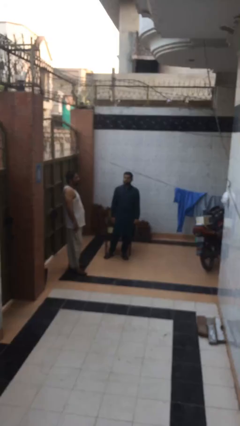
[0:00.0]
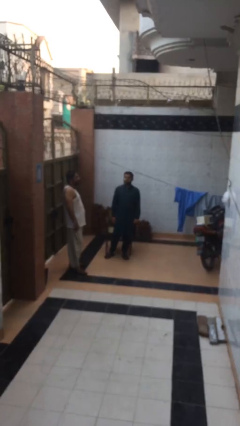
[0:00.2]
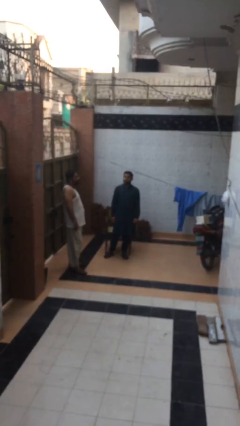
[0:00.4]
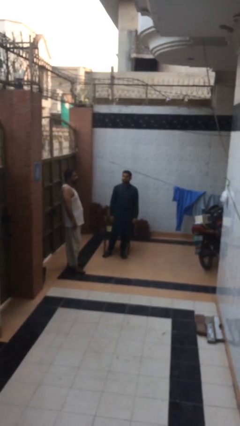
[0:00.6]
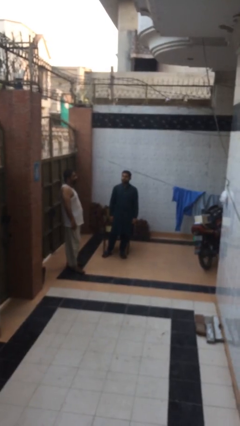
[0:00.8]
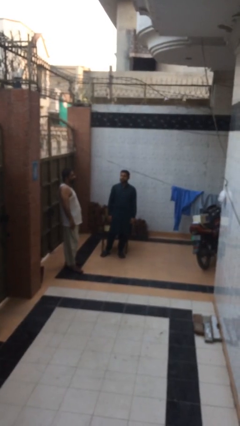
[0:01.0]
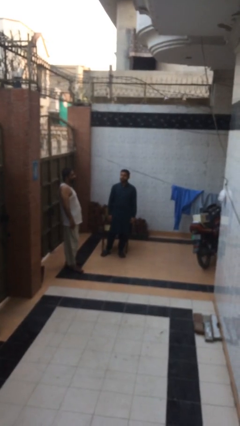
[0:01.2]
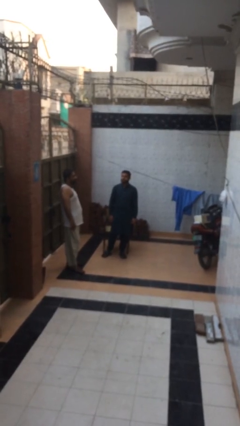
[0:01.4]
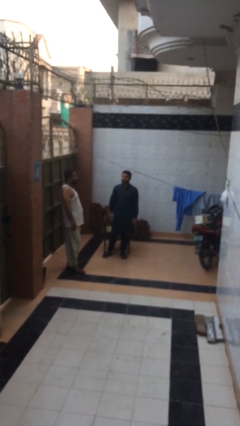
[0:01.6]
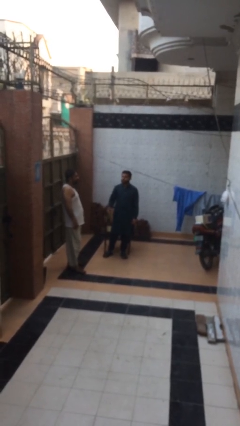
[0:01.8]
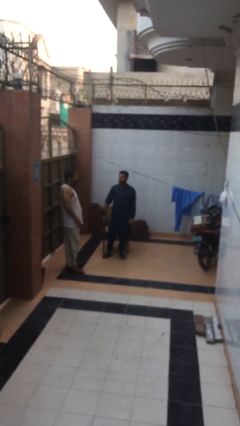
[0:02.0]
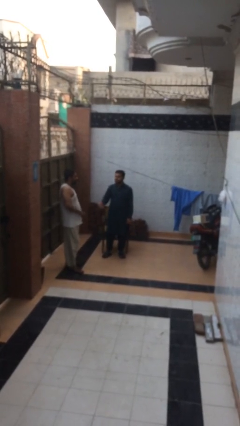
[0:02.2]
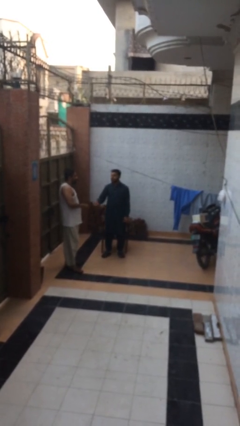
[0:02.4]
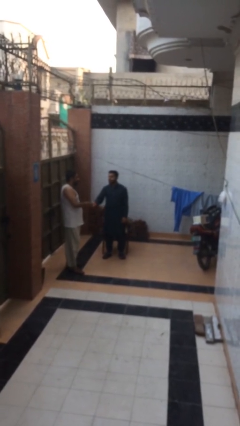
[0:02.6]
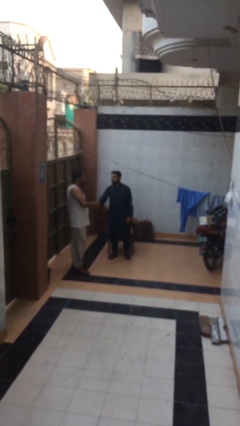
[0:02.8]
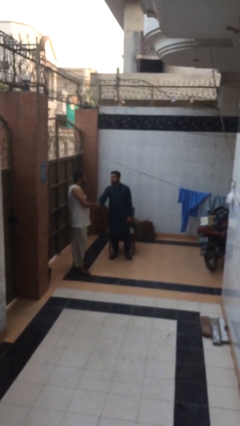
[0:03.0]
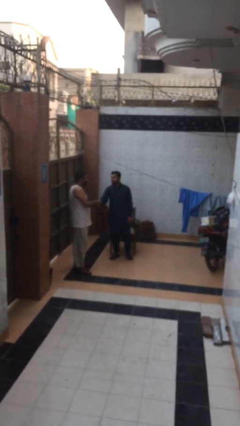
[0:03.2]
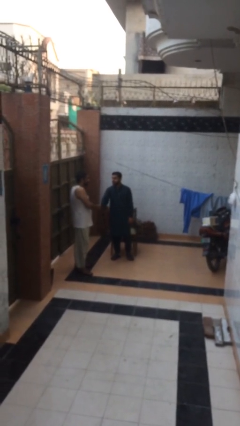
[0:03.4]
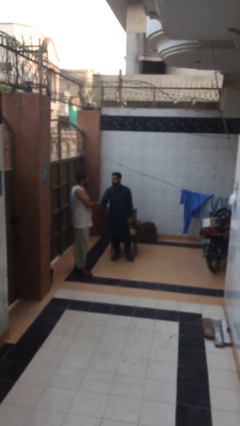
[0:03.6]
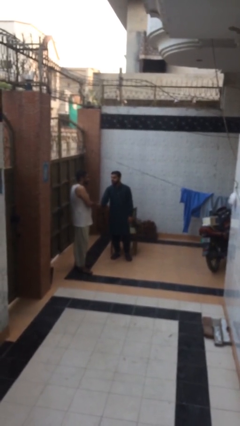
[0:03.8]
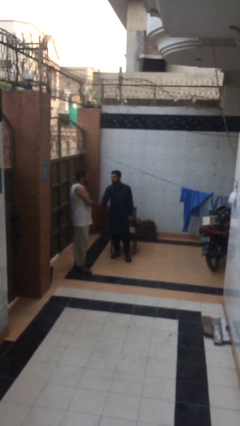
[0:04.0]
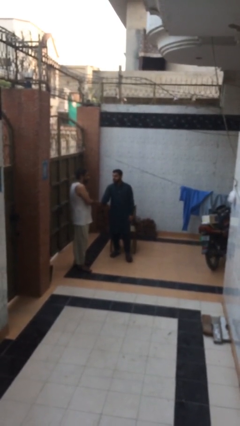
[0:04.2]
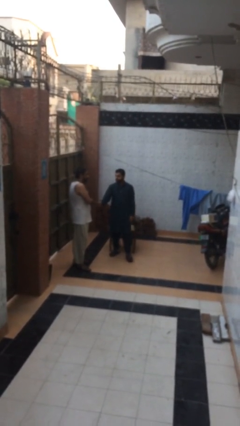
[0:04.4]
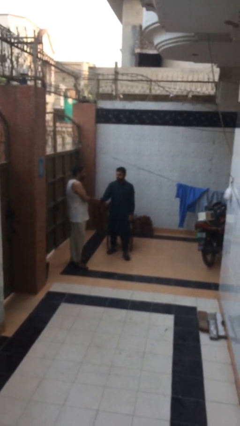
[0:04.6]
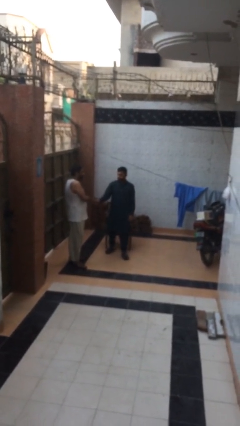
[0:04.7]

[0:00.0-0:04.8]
person shakes hand

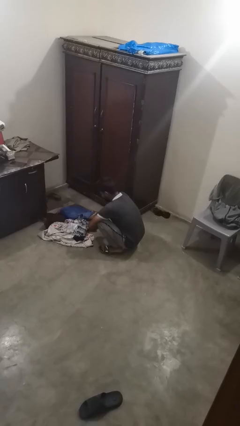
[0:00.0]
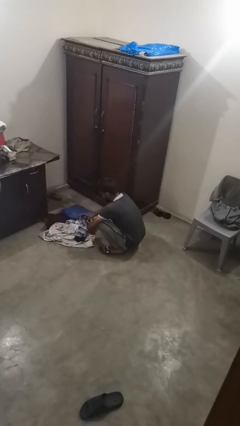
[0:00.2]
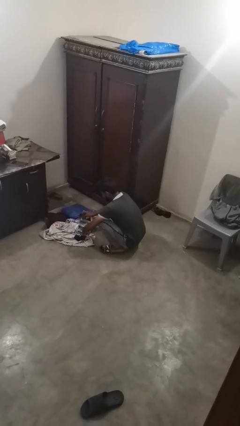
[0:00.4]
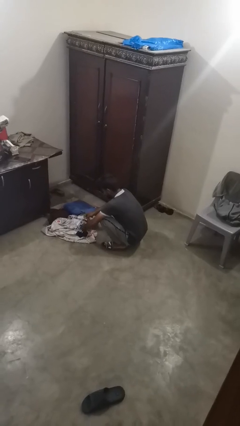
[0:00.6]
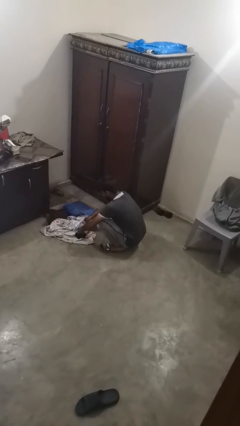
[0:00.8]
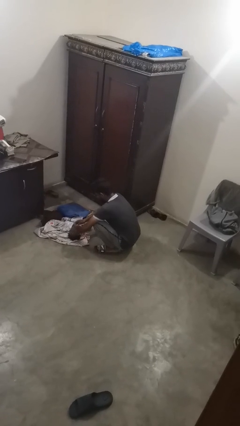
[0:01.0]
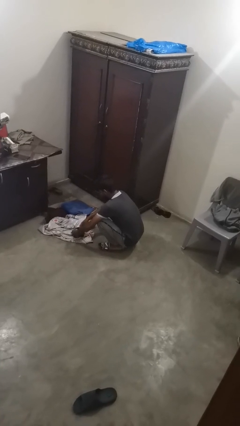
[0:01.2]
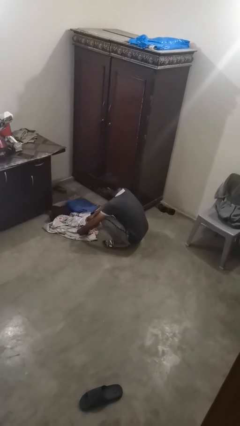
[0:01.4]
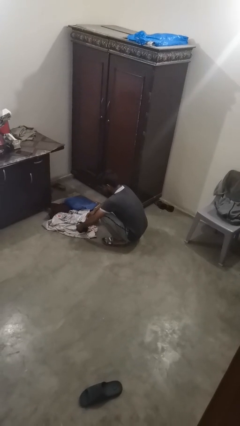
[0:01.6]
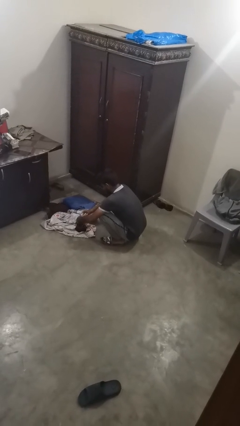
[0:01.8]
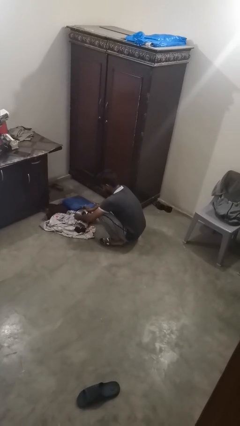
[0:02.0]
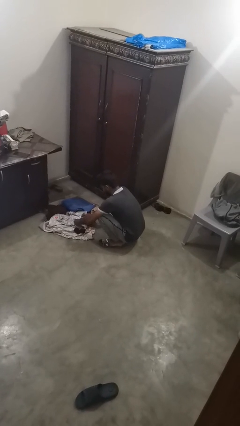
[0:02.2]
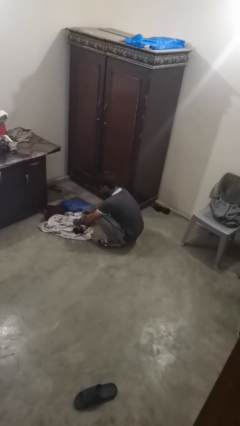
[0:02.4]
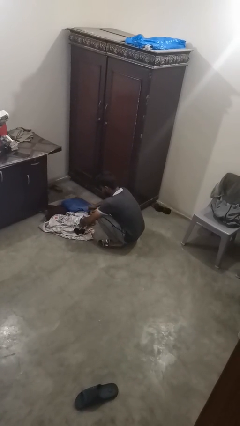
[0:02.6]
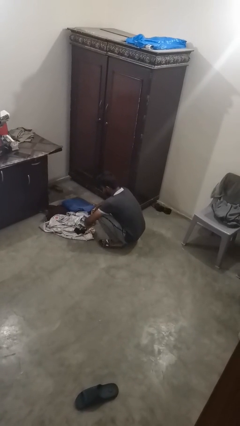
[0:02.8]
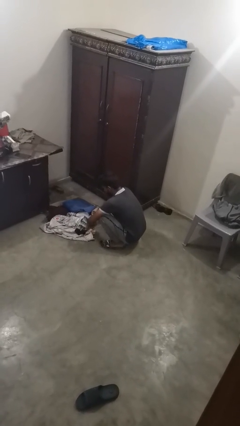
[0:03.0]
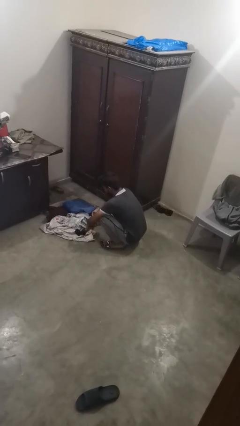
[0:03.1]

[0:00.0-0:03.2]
person folds socks

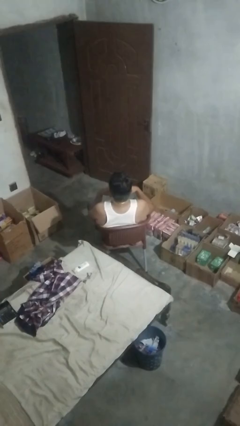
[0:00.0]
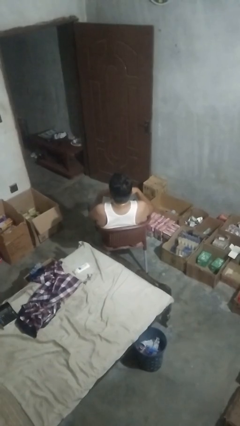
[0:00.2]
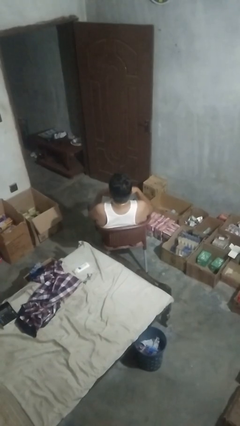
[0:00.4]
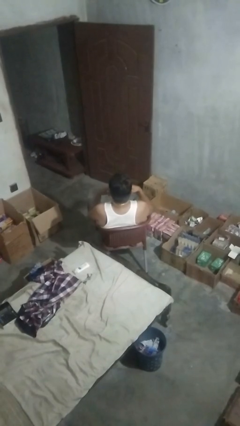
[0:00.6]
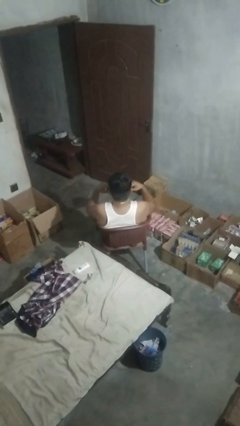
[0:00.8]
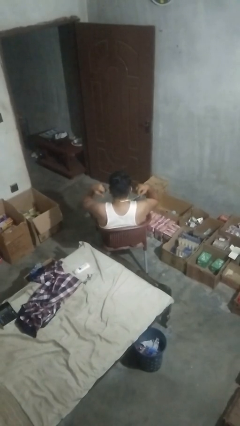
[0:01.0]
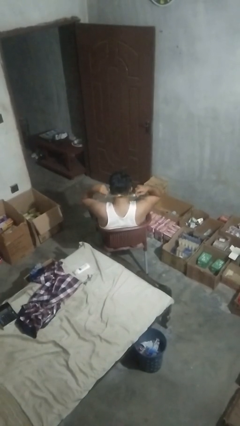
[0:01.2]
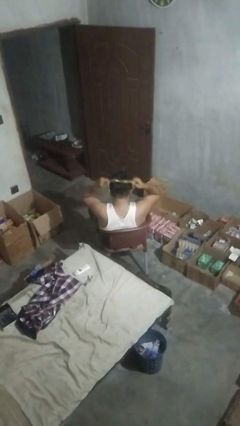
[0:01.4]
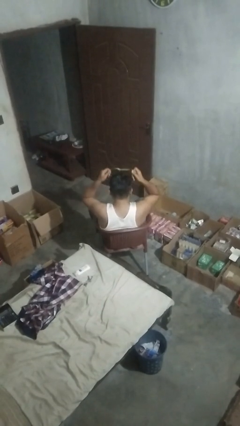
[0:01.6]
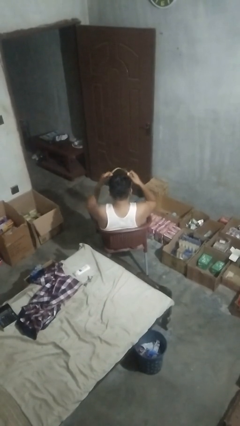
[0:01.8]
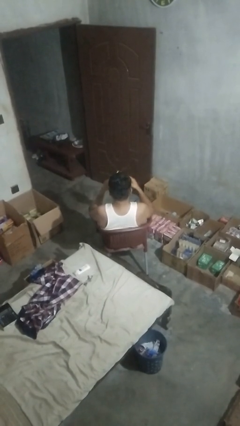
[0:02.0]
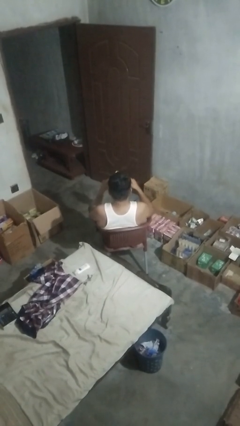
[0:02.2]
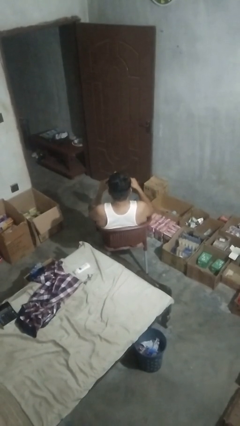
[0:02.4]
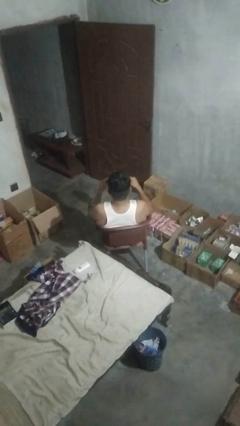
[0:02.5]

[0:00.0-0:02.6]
person takes off necklace
